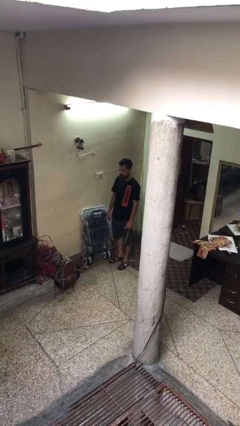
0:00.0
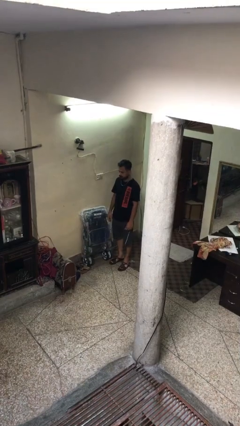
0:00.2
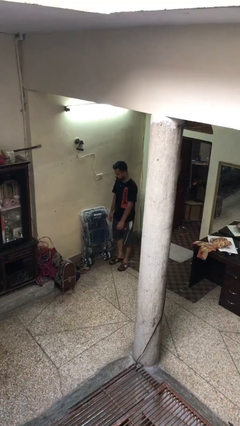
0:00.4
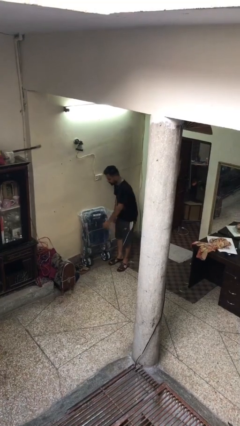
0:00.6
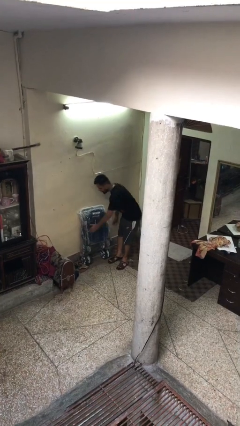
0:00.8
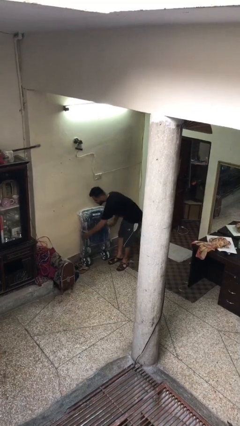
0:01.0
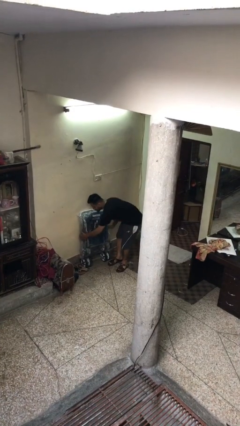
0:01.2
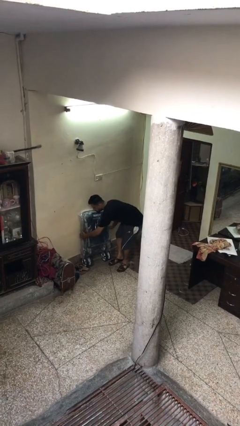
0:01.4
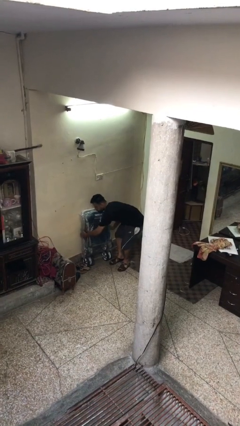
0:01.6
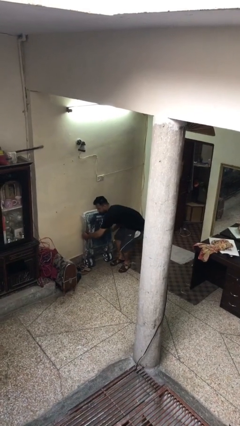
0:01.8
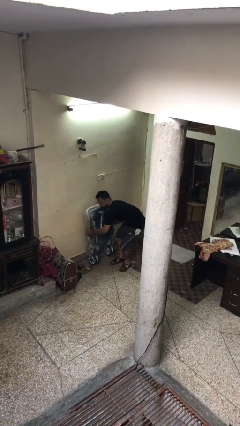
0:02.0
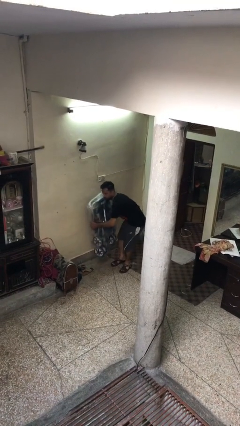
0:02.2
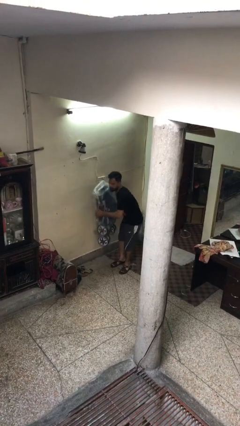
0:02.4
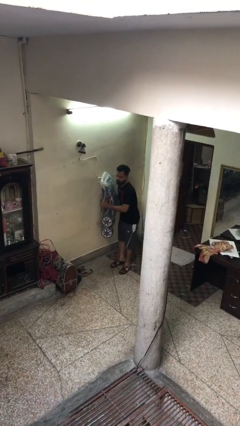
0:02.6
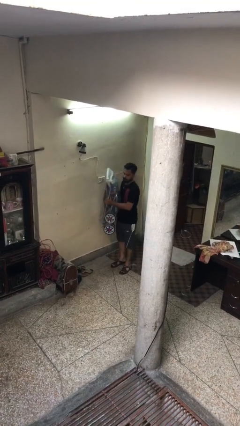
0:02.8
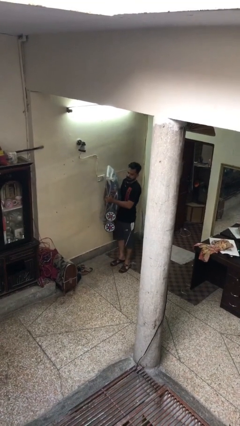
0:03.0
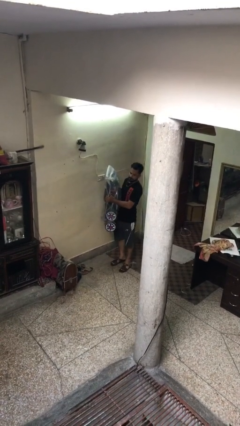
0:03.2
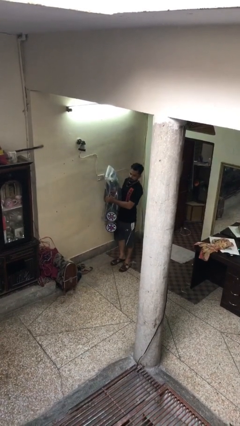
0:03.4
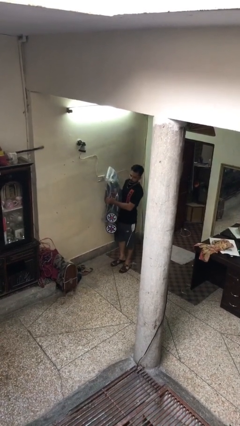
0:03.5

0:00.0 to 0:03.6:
person picks up object from floor

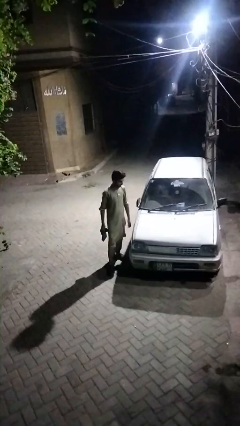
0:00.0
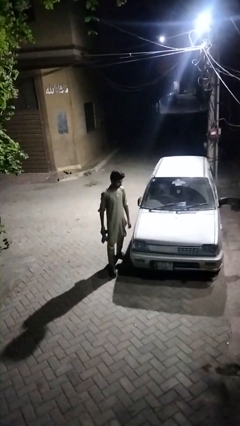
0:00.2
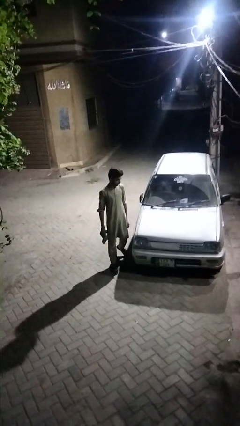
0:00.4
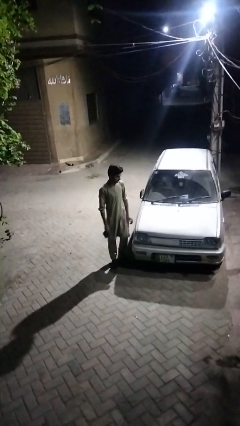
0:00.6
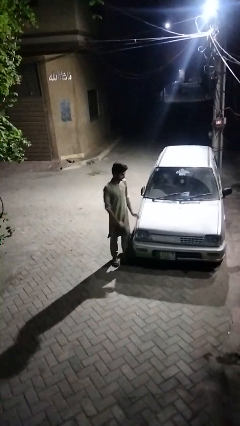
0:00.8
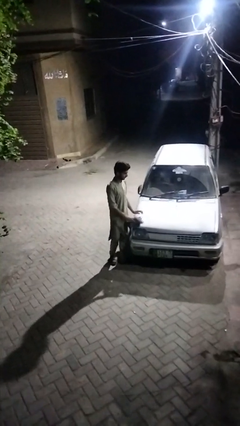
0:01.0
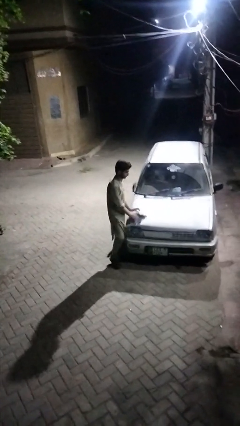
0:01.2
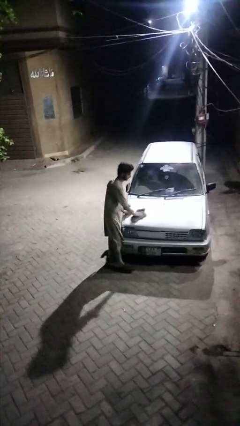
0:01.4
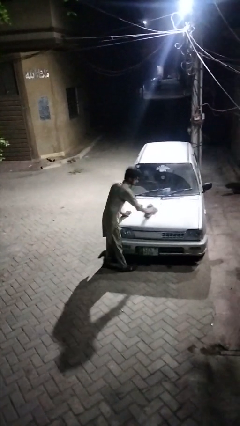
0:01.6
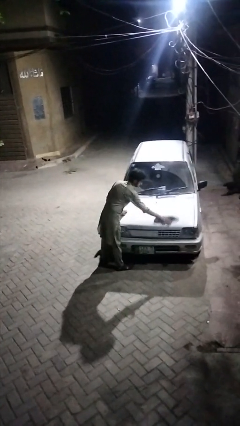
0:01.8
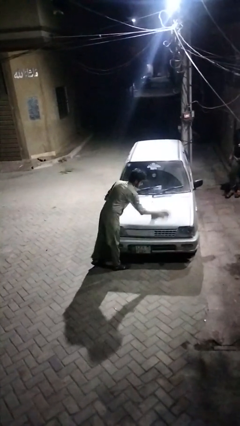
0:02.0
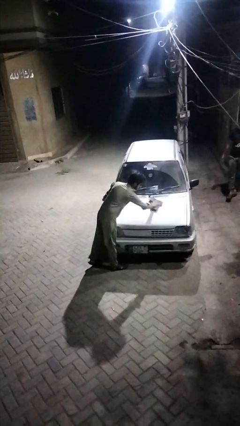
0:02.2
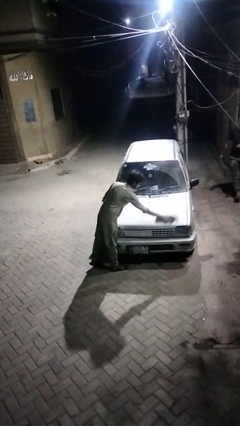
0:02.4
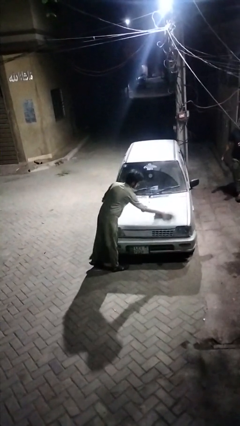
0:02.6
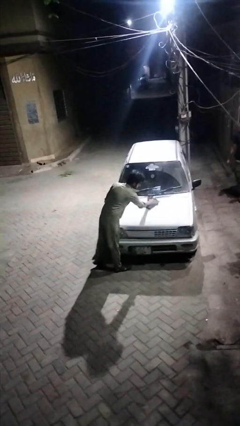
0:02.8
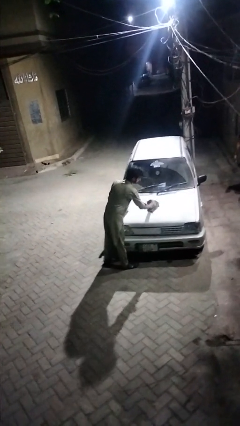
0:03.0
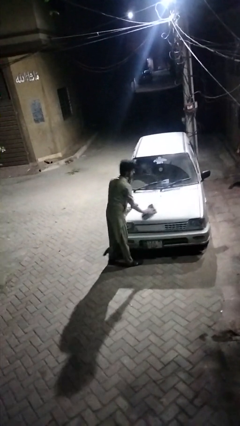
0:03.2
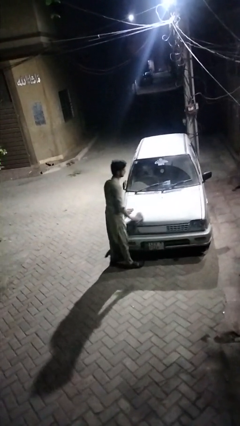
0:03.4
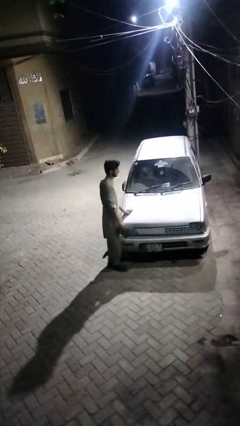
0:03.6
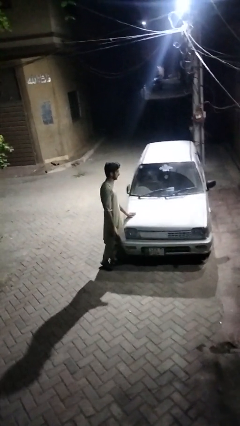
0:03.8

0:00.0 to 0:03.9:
person polishes car with rag

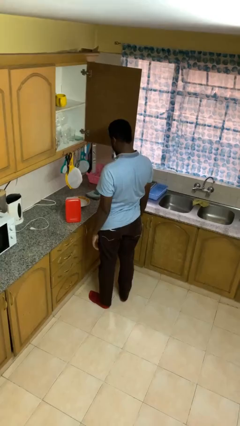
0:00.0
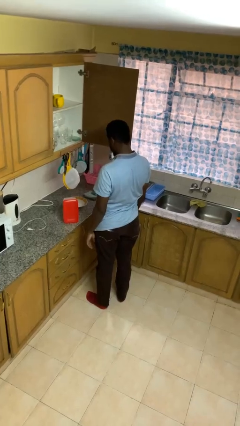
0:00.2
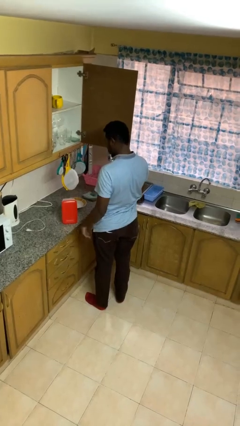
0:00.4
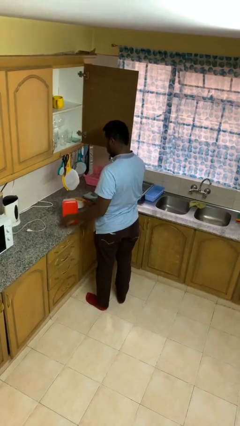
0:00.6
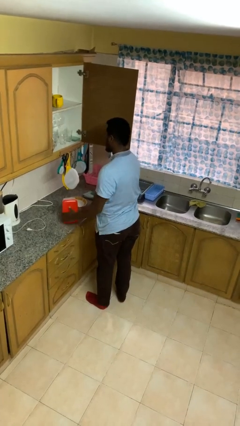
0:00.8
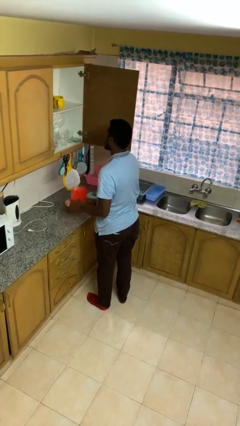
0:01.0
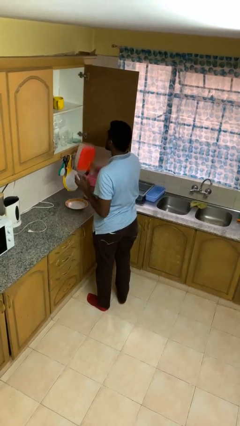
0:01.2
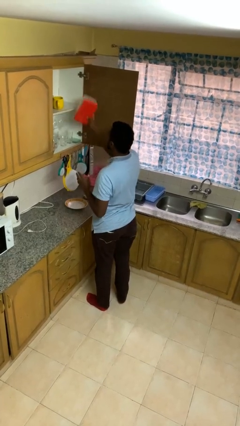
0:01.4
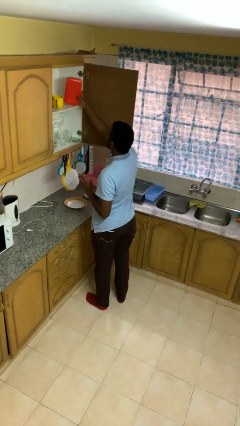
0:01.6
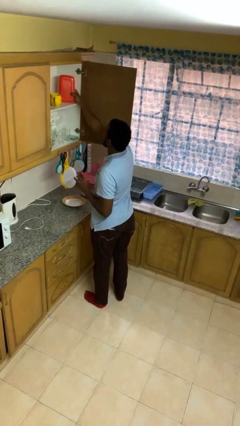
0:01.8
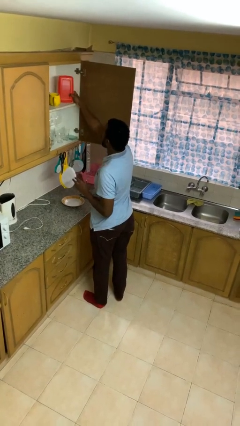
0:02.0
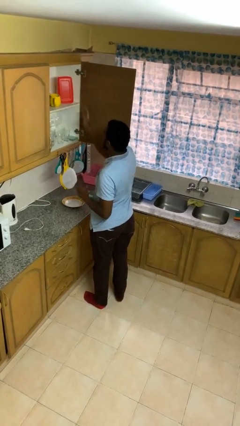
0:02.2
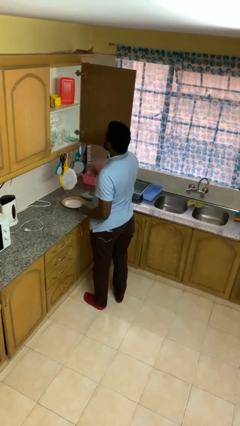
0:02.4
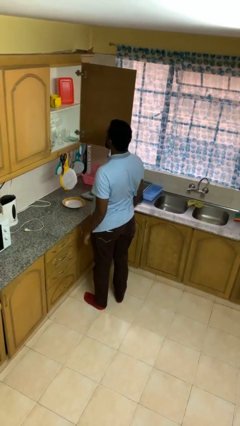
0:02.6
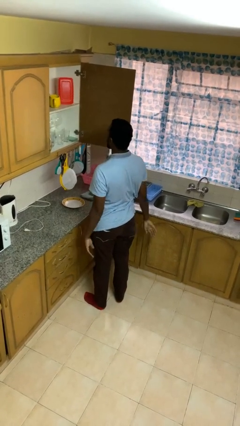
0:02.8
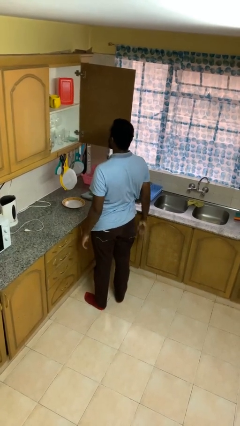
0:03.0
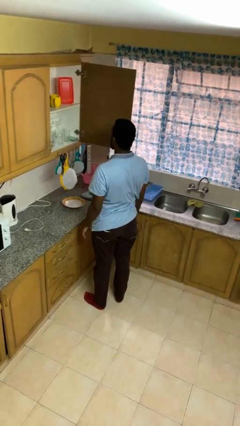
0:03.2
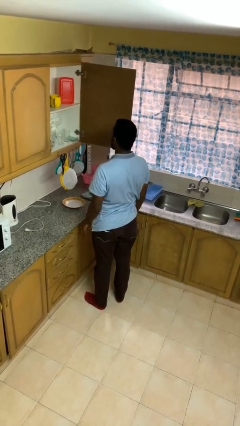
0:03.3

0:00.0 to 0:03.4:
person puts object in cabinet

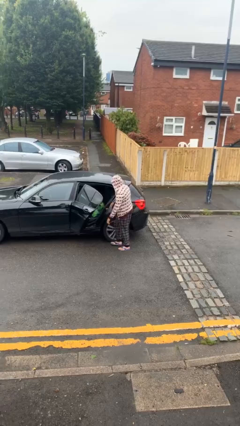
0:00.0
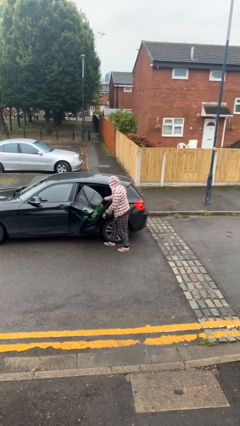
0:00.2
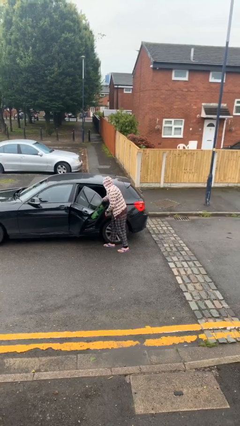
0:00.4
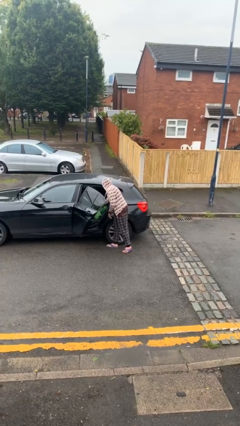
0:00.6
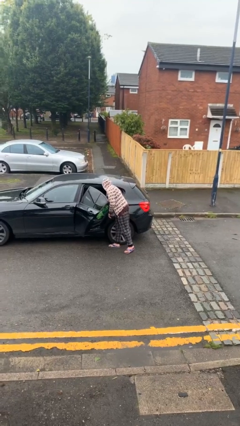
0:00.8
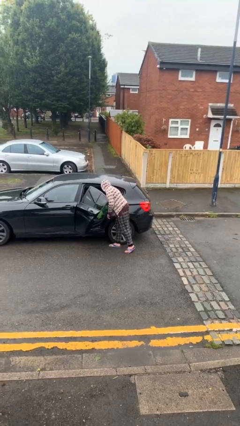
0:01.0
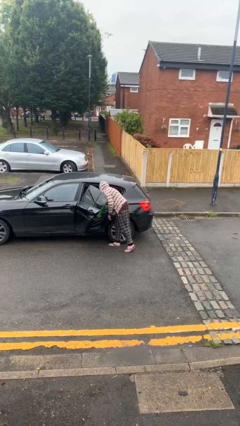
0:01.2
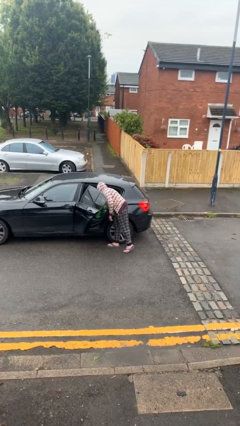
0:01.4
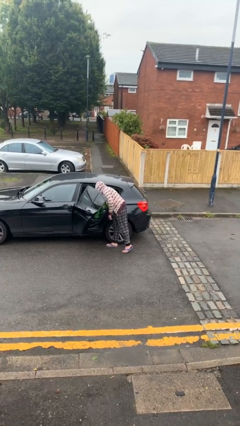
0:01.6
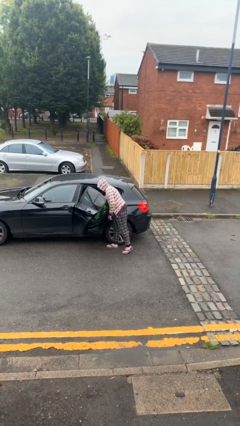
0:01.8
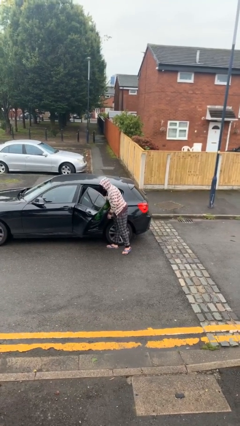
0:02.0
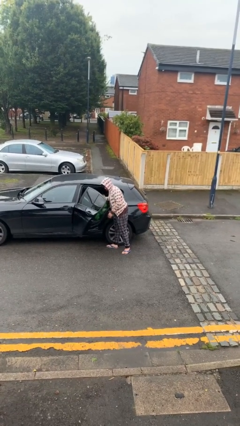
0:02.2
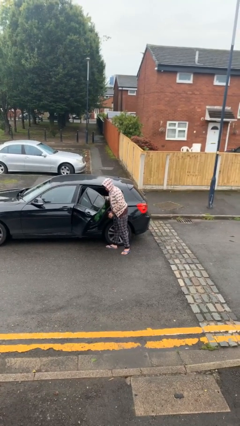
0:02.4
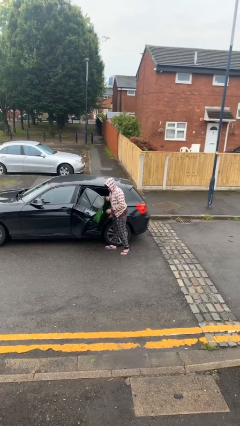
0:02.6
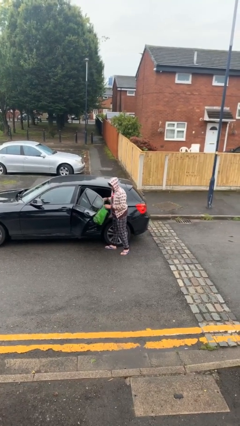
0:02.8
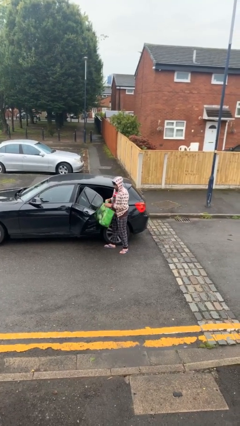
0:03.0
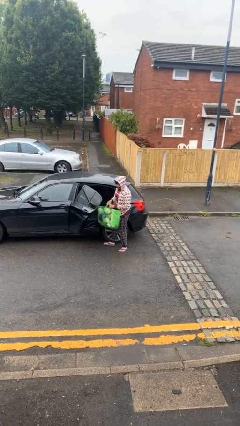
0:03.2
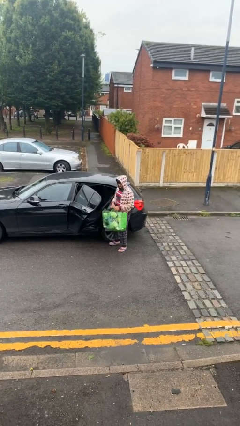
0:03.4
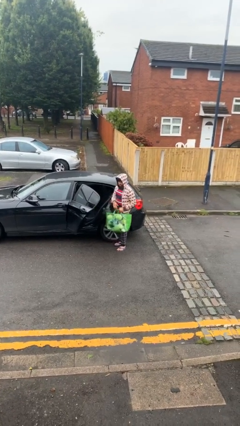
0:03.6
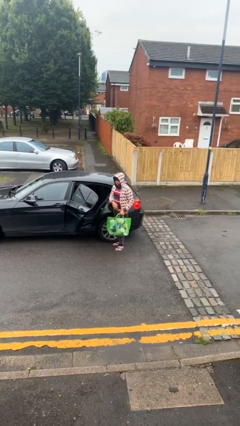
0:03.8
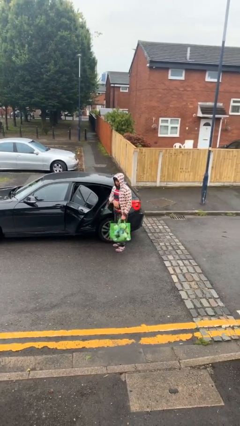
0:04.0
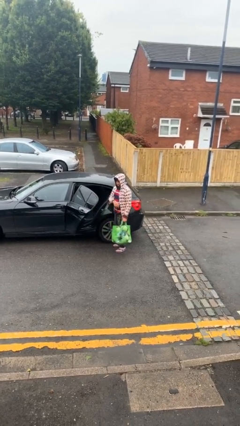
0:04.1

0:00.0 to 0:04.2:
person unloads car

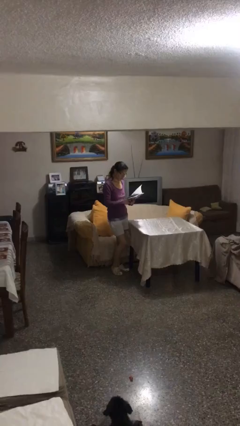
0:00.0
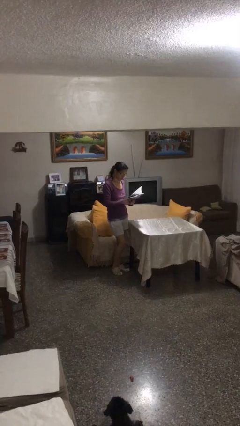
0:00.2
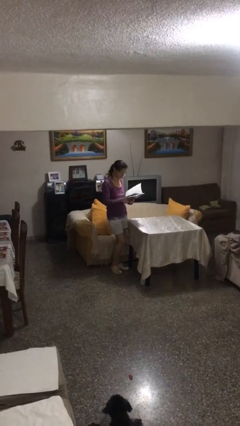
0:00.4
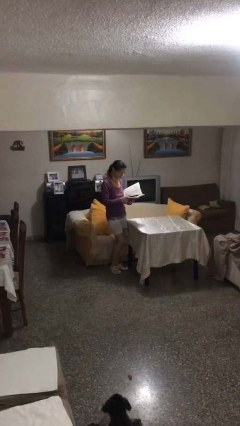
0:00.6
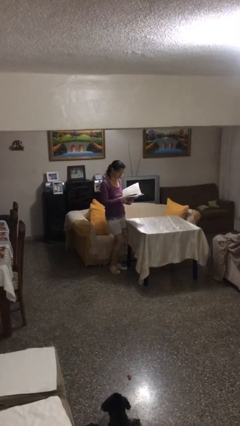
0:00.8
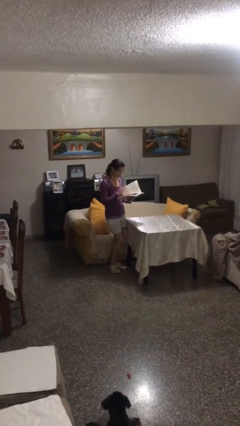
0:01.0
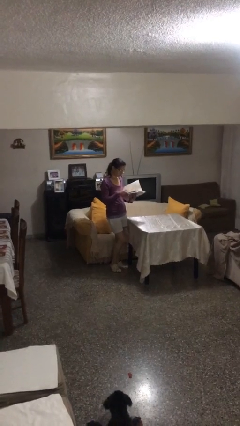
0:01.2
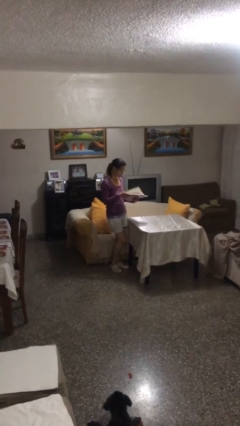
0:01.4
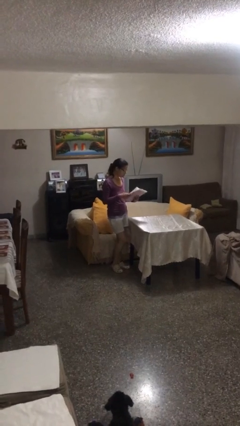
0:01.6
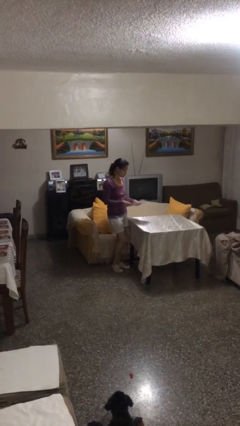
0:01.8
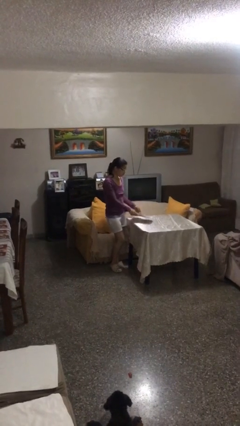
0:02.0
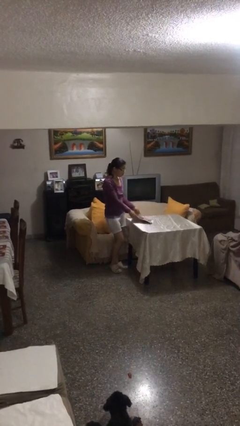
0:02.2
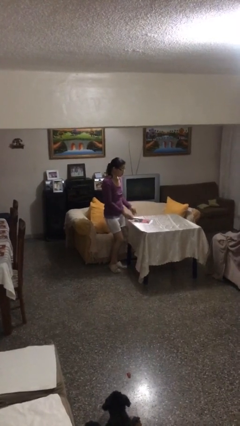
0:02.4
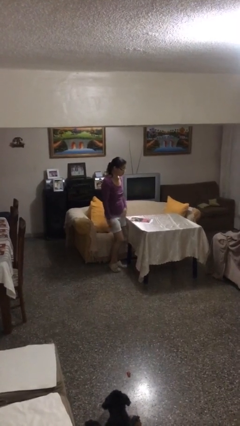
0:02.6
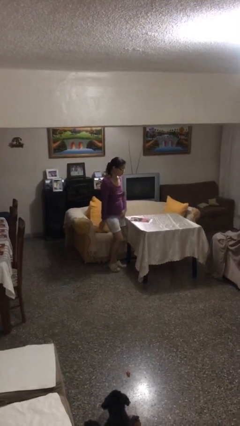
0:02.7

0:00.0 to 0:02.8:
person puts down object on table

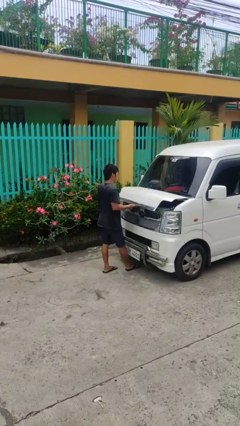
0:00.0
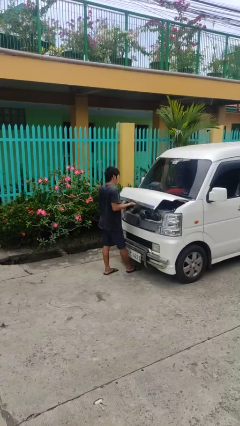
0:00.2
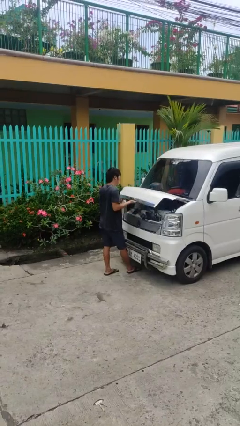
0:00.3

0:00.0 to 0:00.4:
person opens car hood
